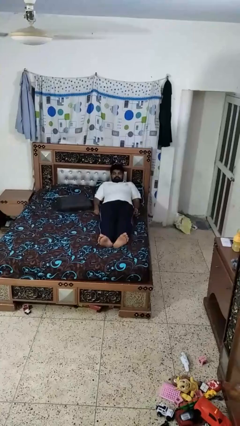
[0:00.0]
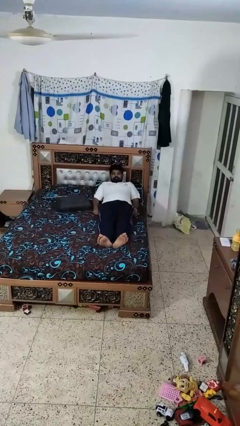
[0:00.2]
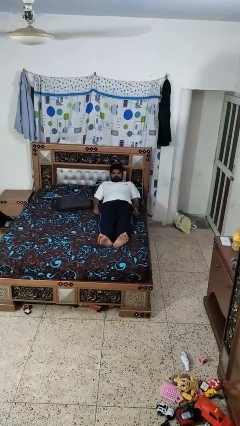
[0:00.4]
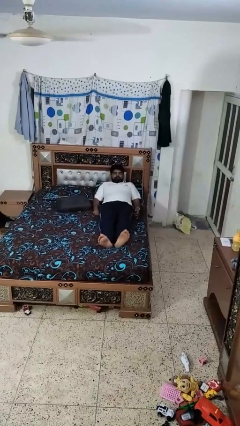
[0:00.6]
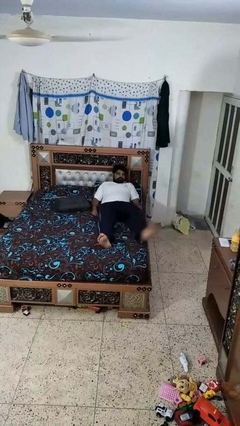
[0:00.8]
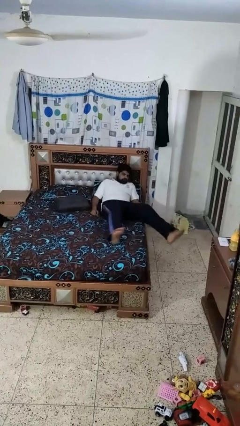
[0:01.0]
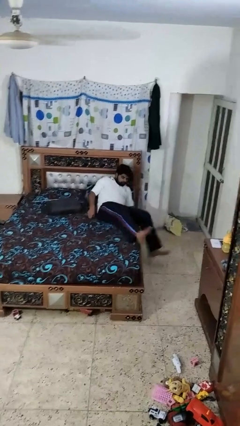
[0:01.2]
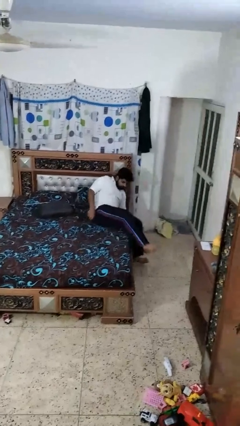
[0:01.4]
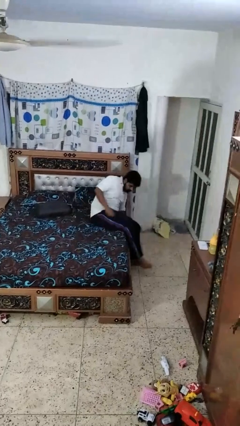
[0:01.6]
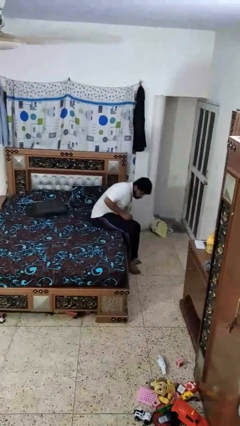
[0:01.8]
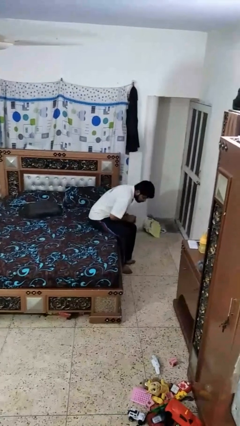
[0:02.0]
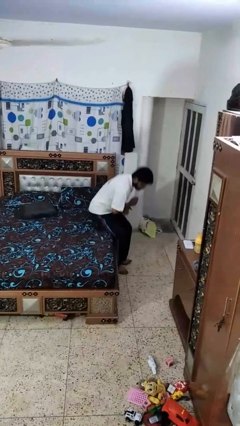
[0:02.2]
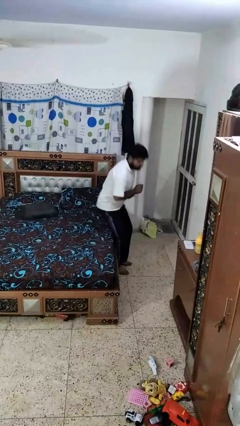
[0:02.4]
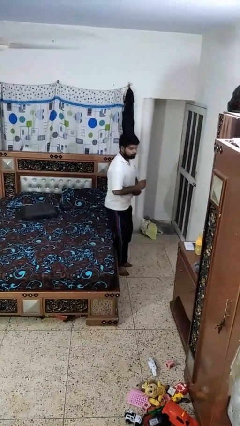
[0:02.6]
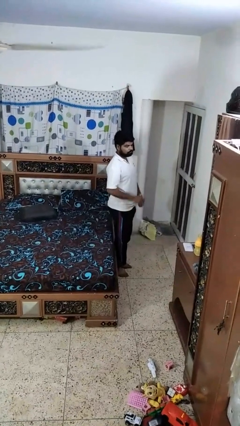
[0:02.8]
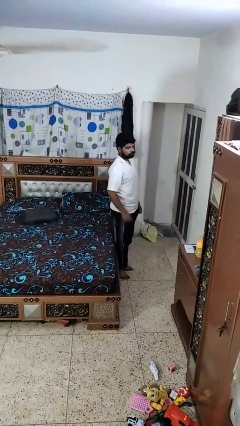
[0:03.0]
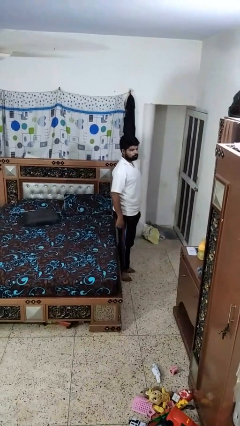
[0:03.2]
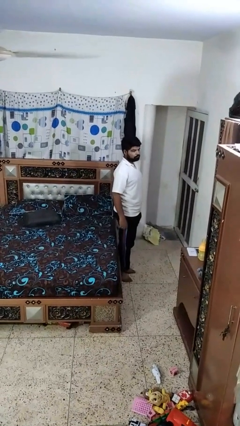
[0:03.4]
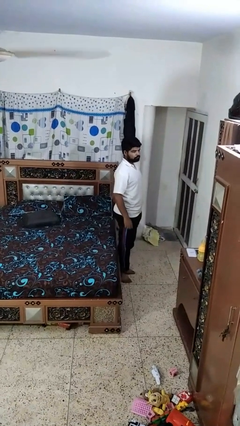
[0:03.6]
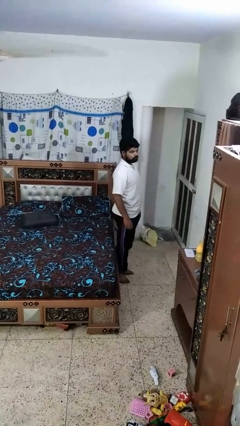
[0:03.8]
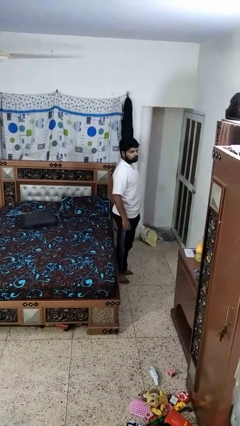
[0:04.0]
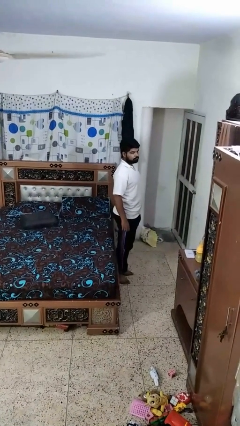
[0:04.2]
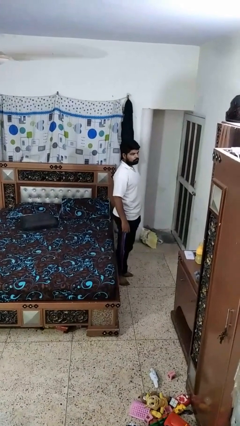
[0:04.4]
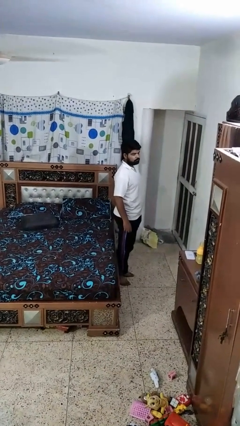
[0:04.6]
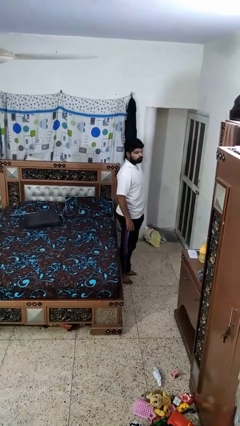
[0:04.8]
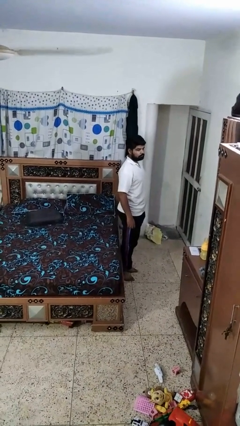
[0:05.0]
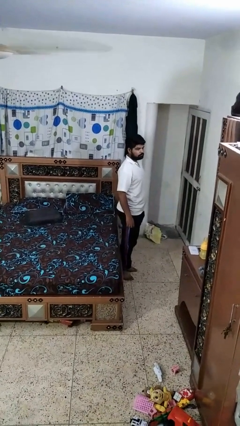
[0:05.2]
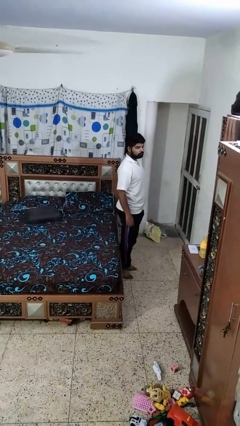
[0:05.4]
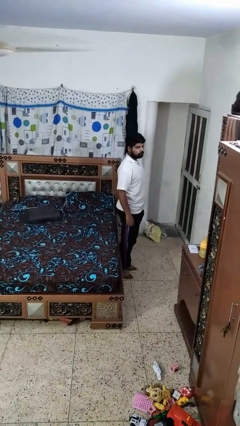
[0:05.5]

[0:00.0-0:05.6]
person stands up

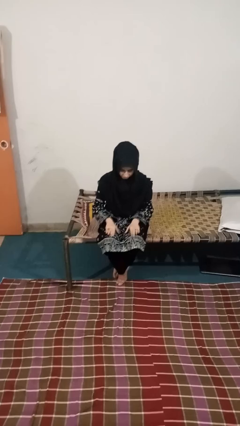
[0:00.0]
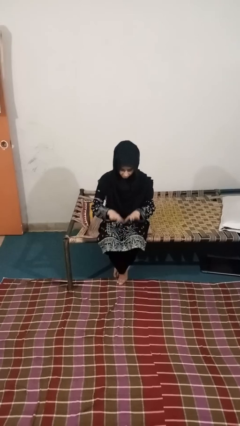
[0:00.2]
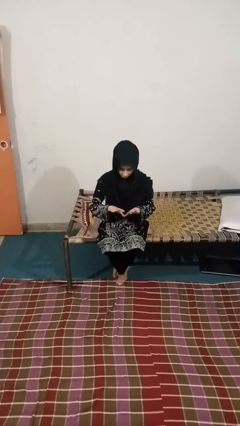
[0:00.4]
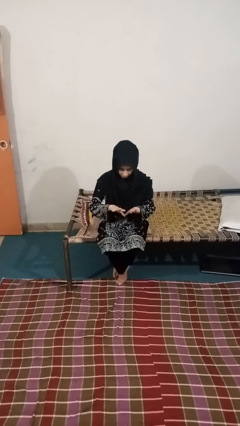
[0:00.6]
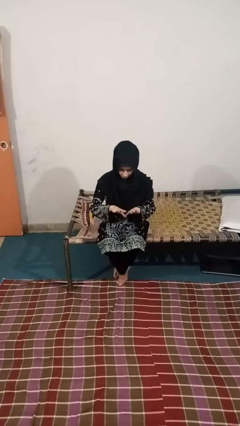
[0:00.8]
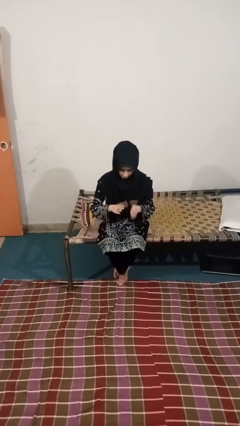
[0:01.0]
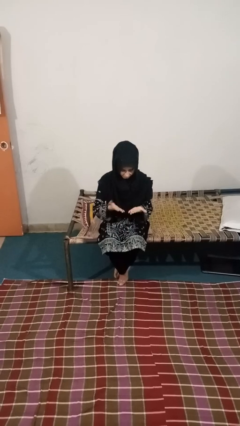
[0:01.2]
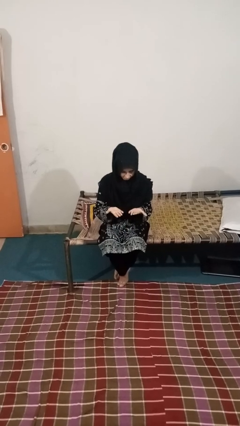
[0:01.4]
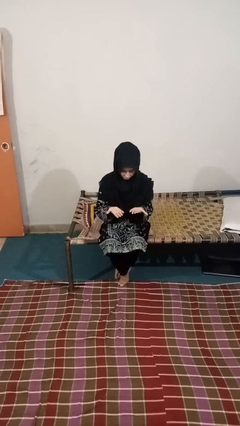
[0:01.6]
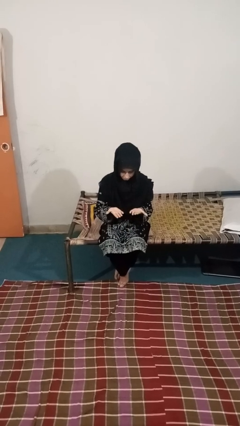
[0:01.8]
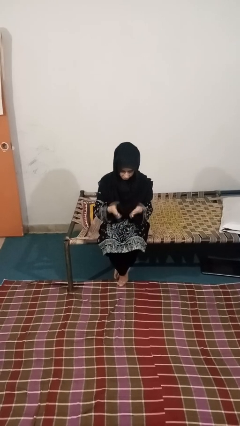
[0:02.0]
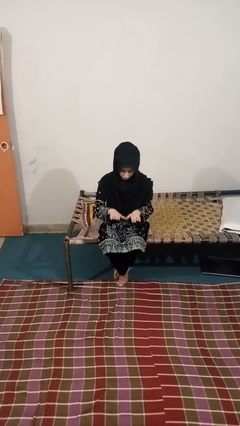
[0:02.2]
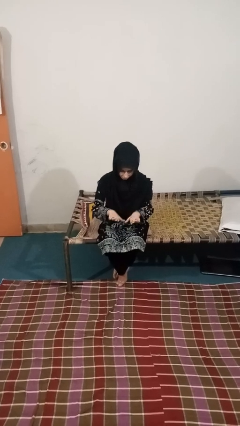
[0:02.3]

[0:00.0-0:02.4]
person looks at hands in lap

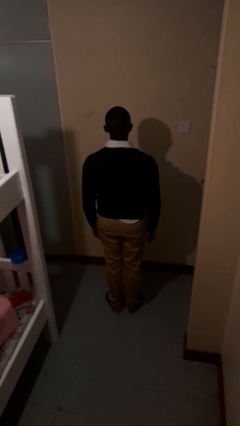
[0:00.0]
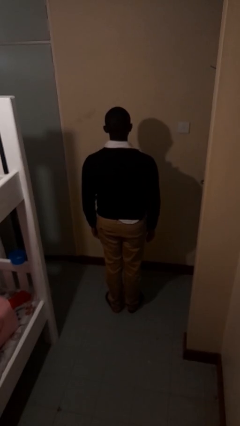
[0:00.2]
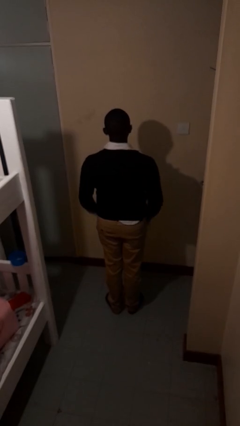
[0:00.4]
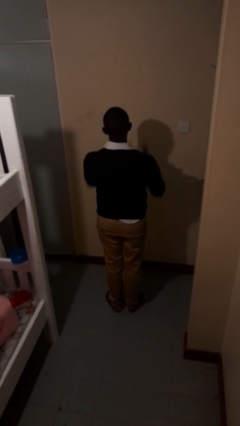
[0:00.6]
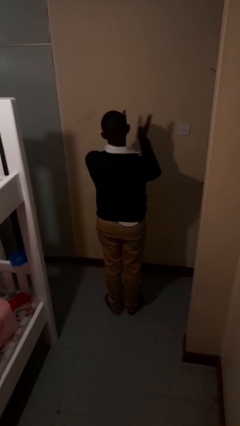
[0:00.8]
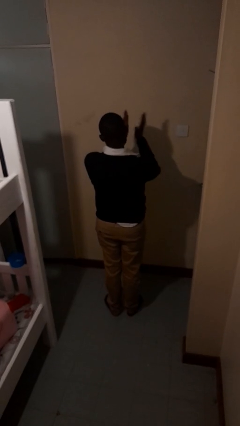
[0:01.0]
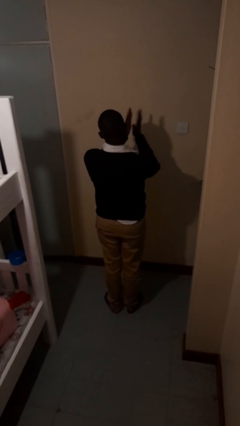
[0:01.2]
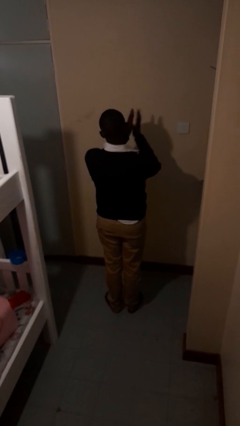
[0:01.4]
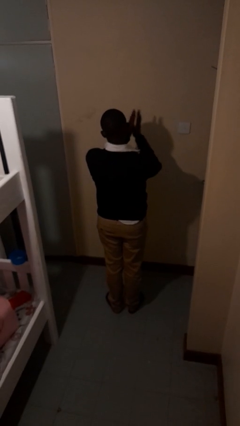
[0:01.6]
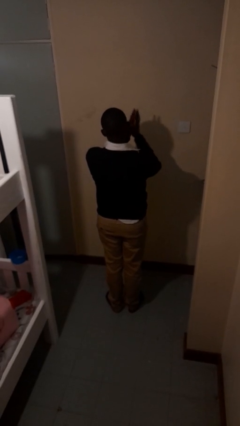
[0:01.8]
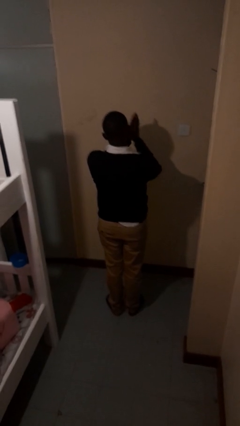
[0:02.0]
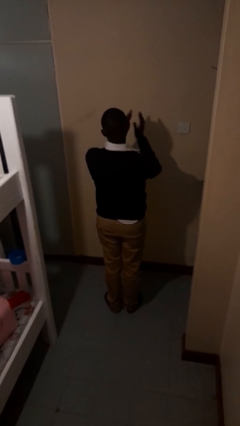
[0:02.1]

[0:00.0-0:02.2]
person claps hands

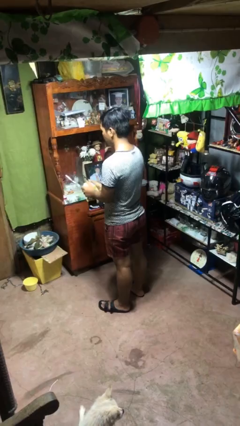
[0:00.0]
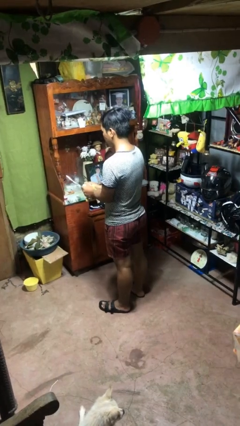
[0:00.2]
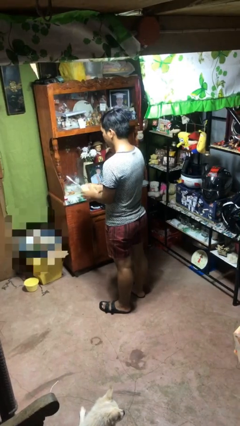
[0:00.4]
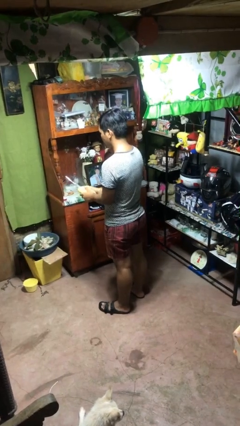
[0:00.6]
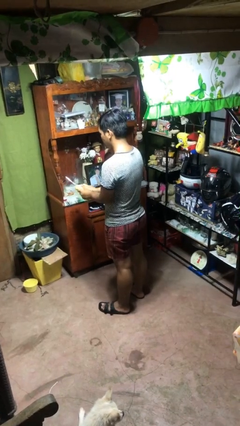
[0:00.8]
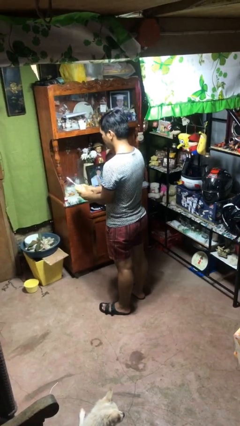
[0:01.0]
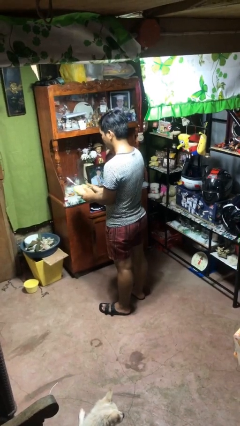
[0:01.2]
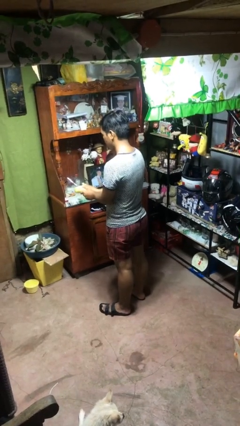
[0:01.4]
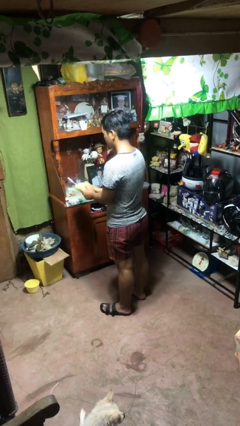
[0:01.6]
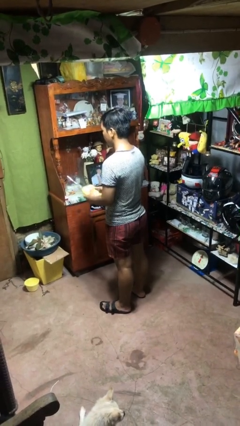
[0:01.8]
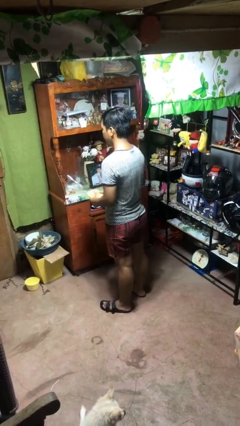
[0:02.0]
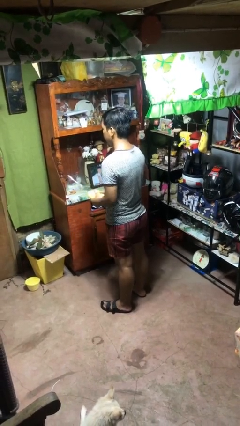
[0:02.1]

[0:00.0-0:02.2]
person squeezes object

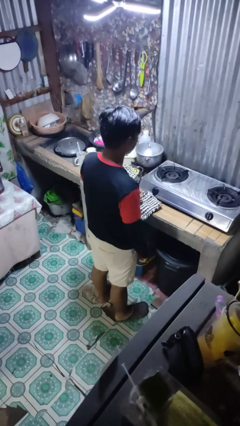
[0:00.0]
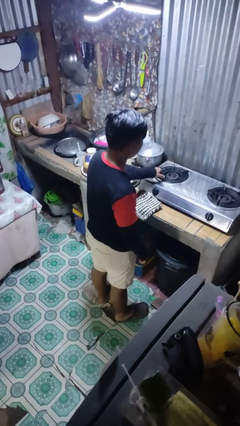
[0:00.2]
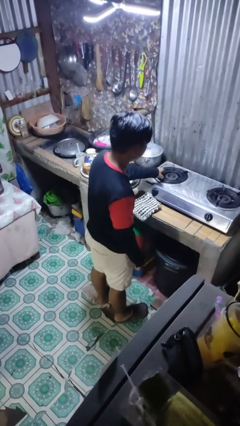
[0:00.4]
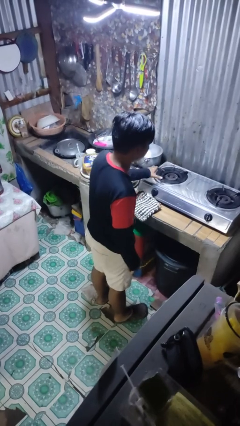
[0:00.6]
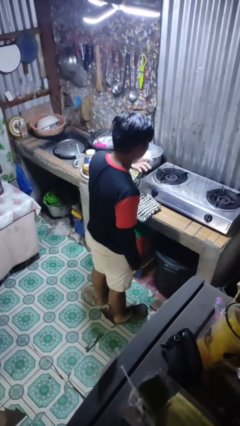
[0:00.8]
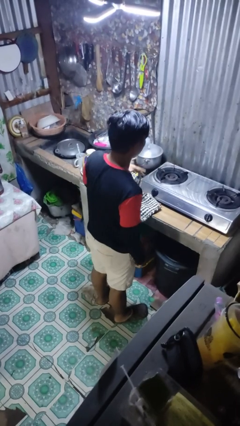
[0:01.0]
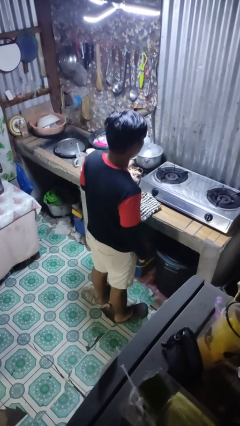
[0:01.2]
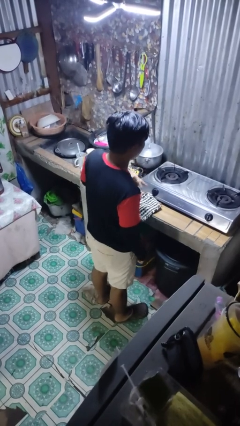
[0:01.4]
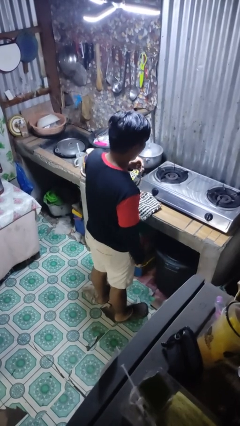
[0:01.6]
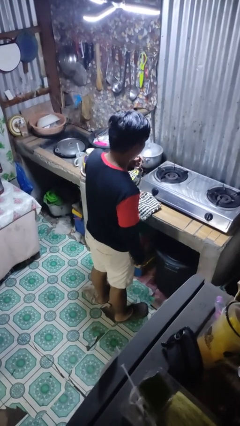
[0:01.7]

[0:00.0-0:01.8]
person burns hand

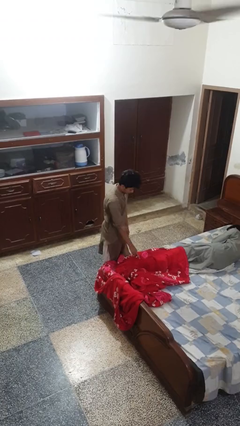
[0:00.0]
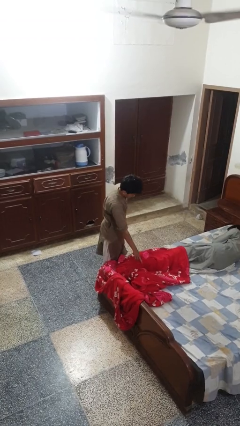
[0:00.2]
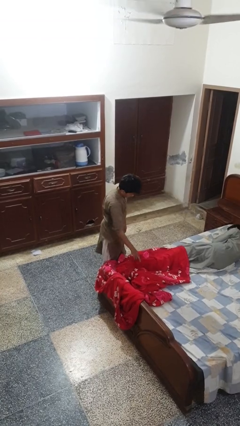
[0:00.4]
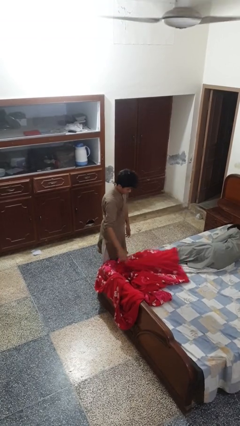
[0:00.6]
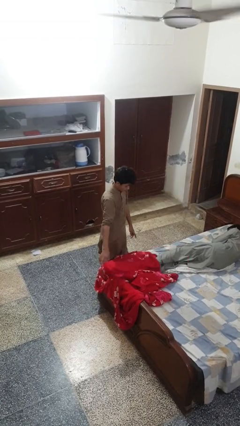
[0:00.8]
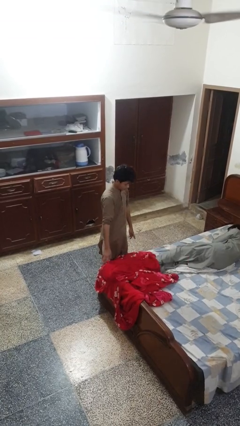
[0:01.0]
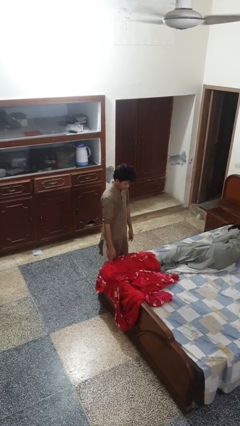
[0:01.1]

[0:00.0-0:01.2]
person uncovers friend with blanket

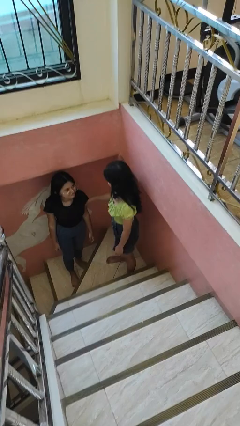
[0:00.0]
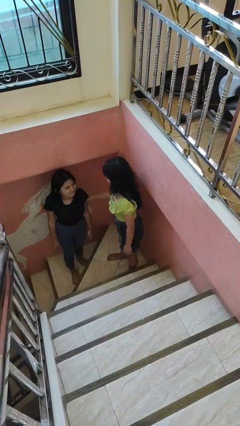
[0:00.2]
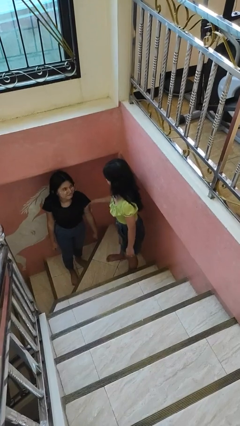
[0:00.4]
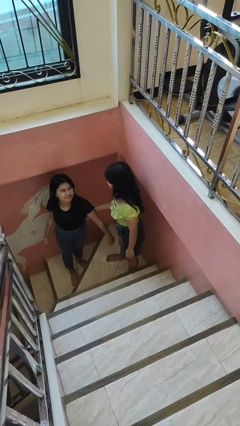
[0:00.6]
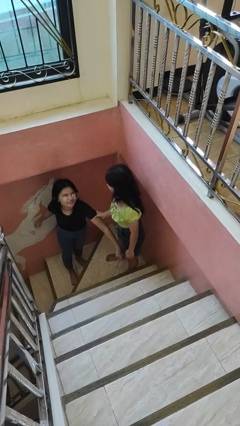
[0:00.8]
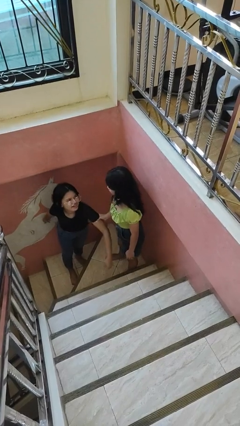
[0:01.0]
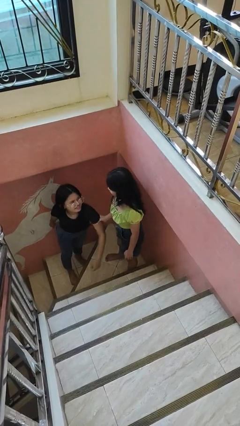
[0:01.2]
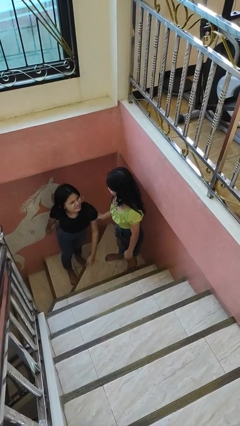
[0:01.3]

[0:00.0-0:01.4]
person grabs person by bicep
